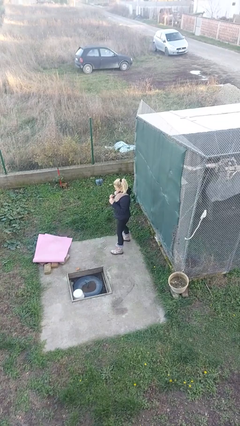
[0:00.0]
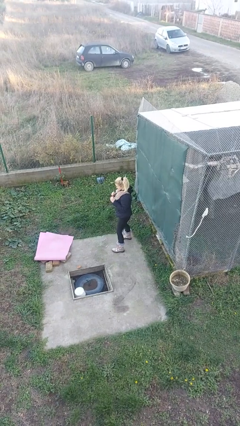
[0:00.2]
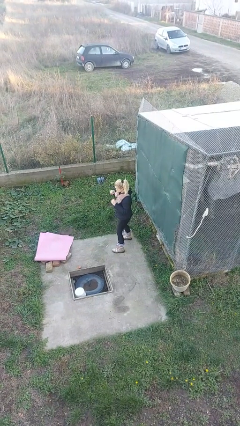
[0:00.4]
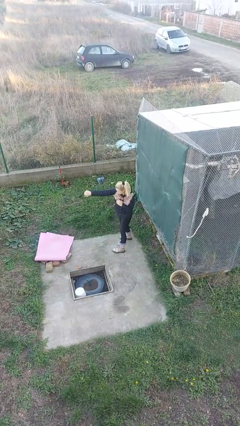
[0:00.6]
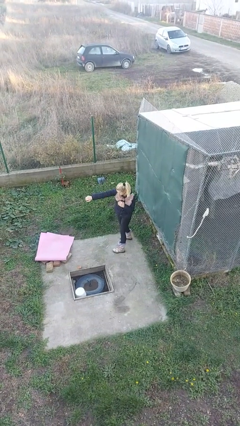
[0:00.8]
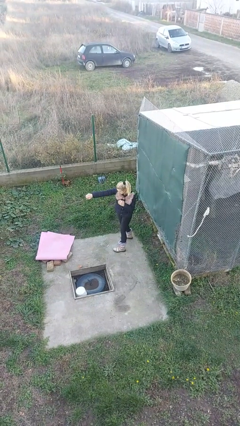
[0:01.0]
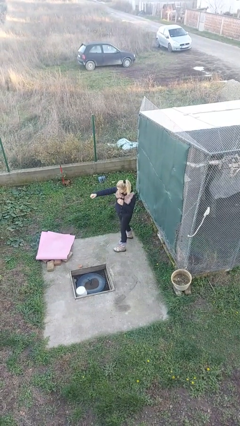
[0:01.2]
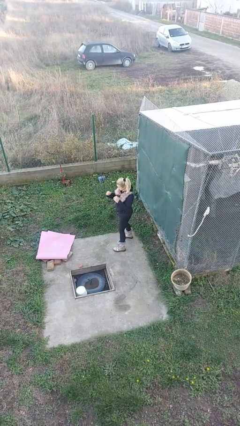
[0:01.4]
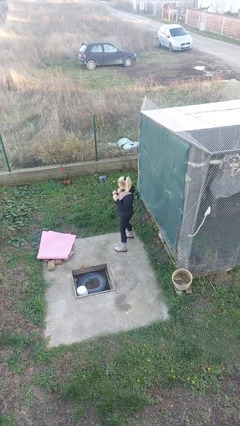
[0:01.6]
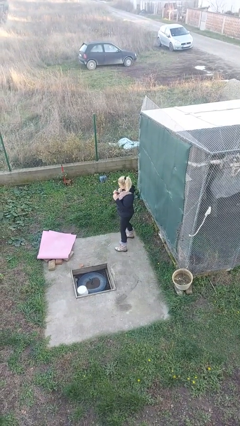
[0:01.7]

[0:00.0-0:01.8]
person punches

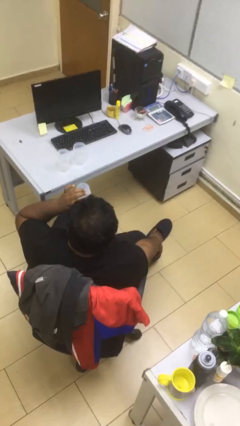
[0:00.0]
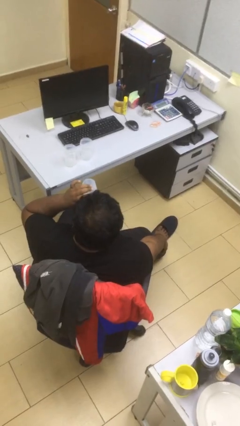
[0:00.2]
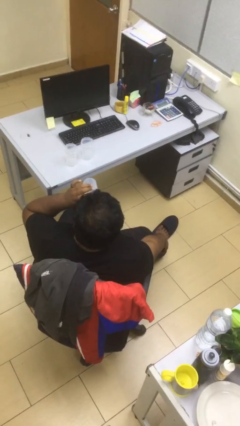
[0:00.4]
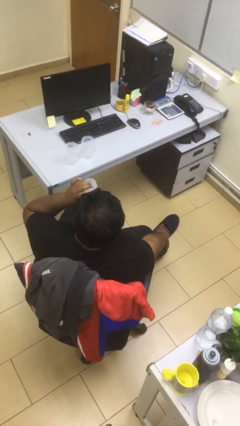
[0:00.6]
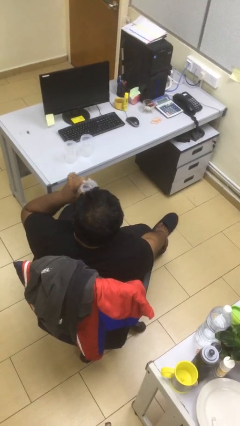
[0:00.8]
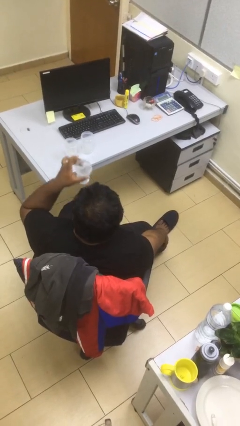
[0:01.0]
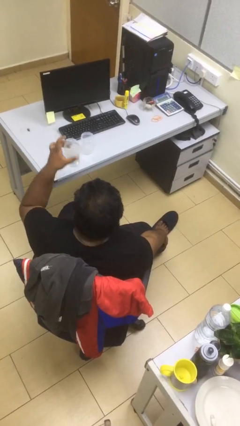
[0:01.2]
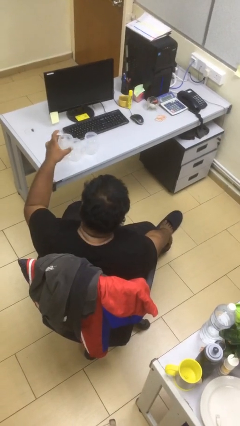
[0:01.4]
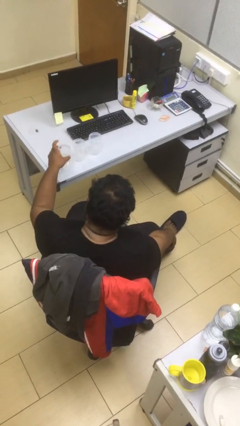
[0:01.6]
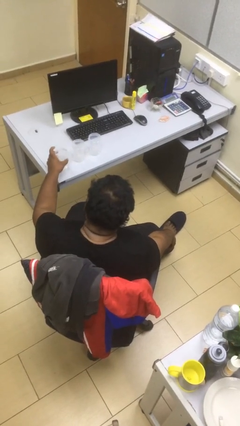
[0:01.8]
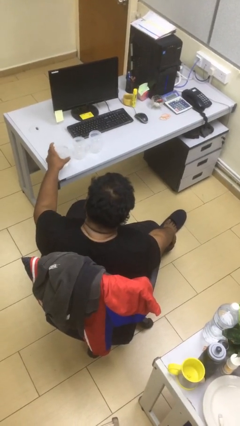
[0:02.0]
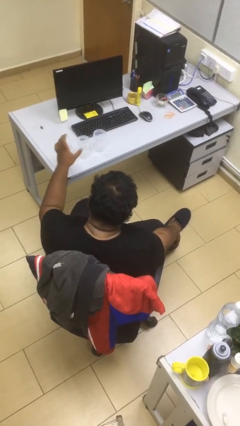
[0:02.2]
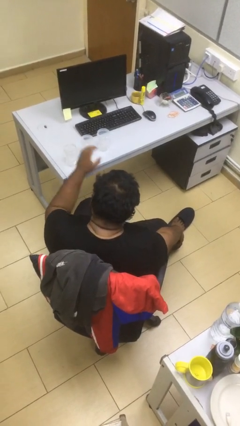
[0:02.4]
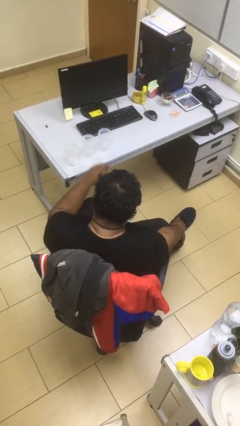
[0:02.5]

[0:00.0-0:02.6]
person puts down object on table

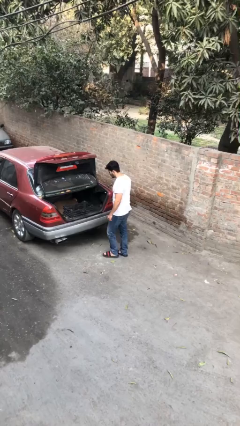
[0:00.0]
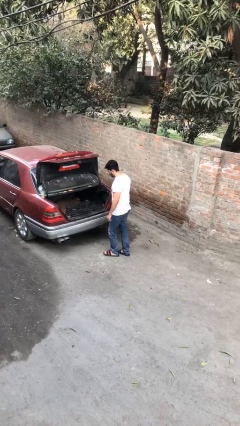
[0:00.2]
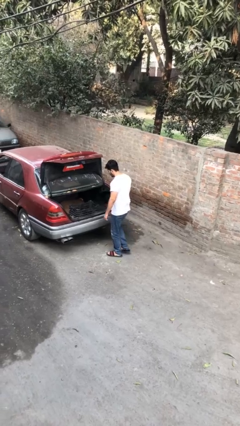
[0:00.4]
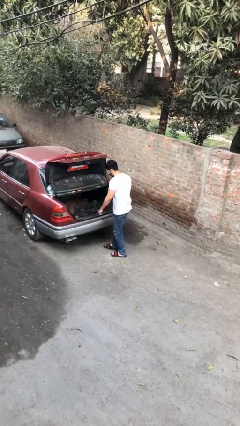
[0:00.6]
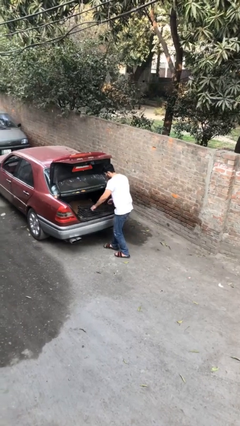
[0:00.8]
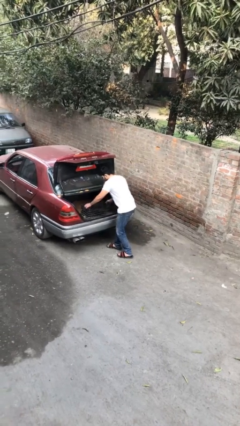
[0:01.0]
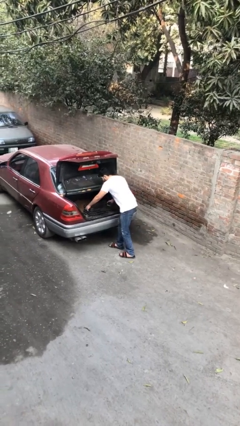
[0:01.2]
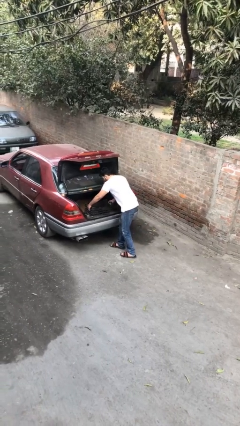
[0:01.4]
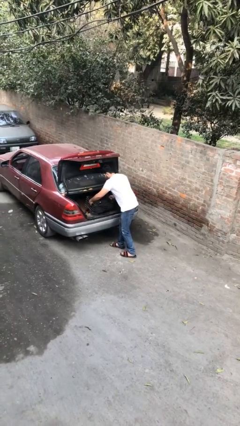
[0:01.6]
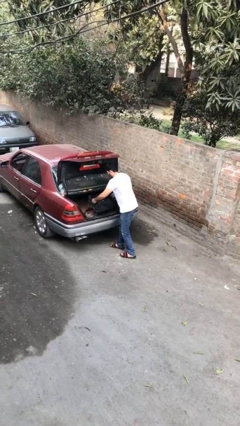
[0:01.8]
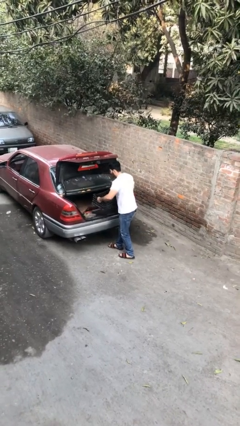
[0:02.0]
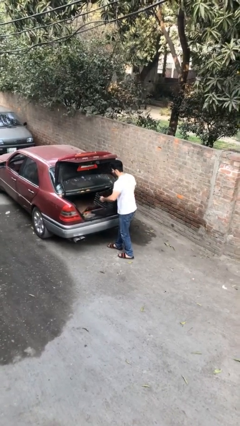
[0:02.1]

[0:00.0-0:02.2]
person unloads car

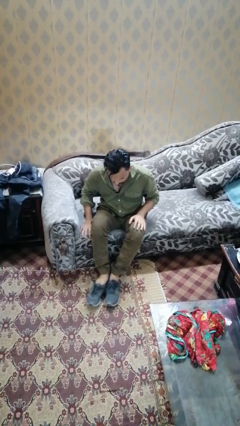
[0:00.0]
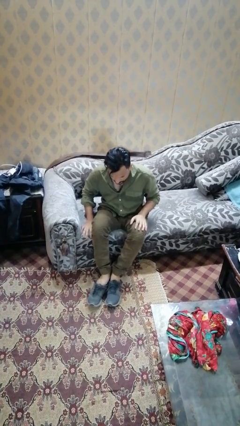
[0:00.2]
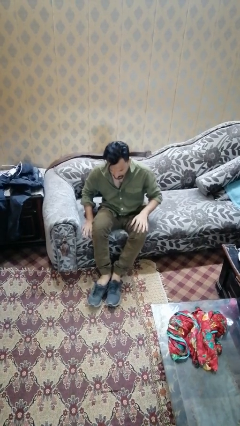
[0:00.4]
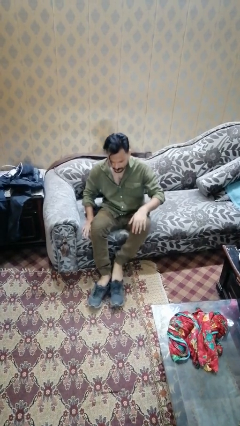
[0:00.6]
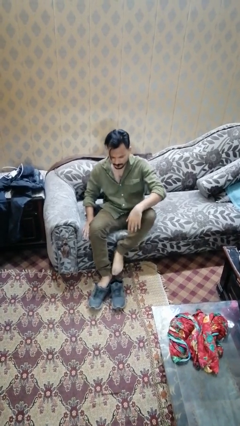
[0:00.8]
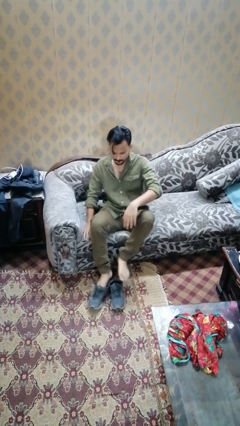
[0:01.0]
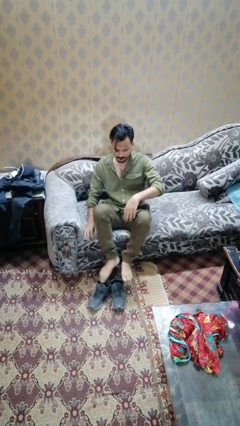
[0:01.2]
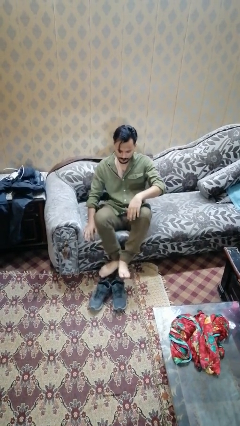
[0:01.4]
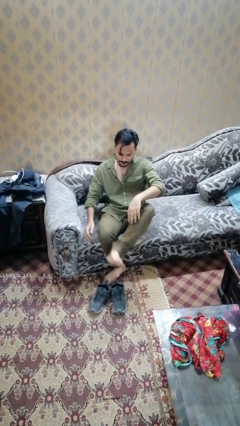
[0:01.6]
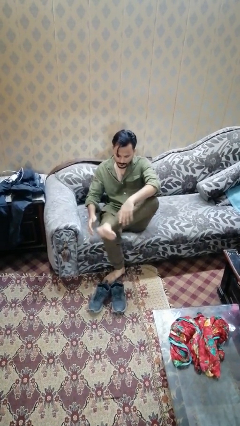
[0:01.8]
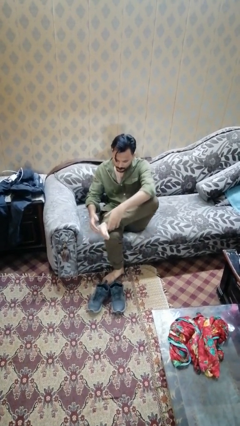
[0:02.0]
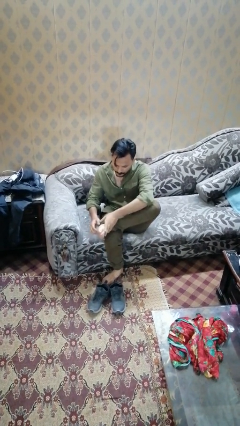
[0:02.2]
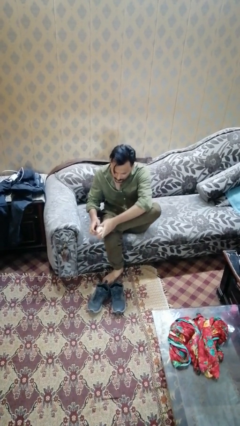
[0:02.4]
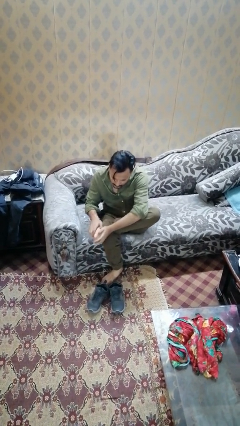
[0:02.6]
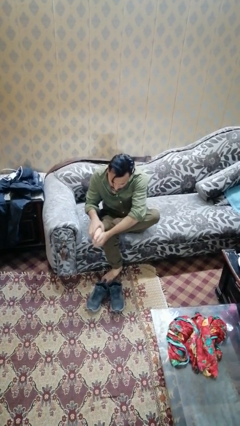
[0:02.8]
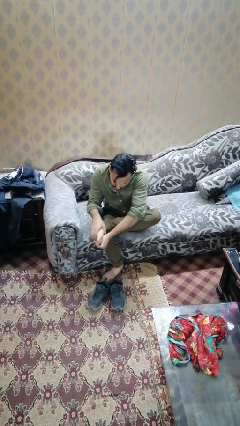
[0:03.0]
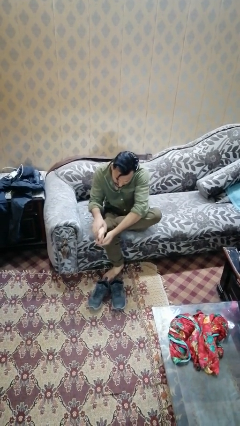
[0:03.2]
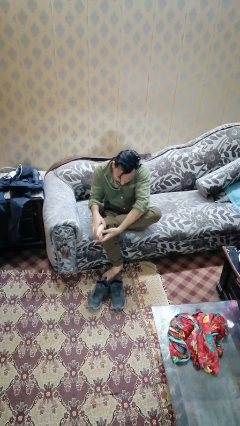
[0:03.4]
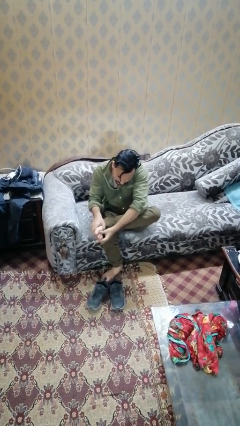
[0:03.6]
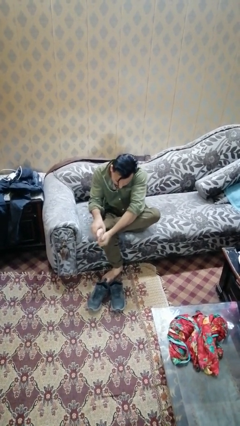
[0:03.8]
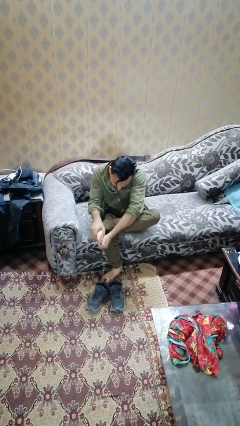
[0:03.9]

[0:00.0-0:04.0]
person rubs foot

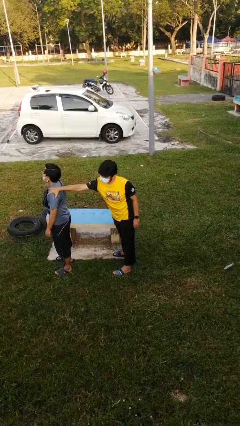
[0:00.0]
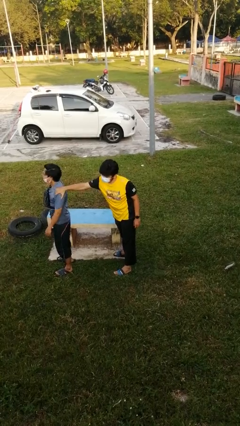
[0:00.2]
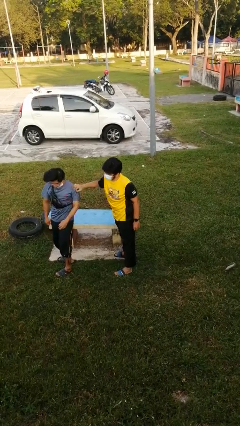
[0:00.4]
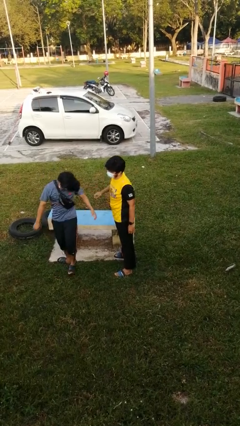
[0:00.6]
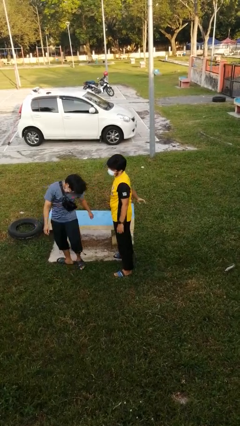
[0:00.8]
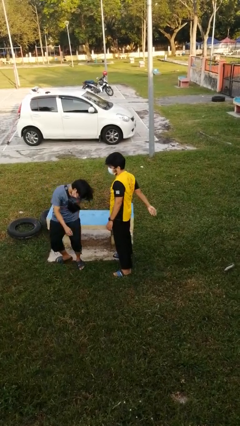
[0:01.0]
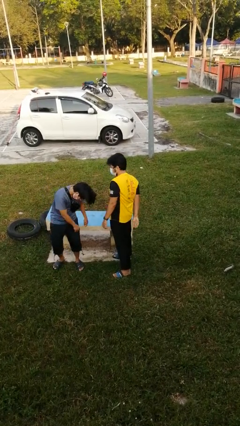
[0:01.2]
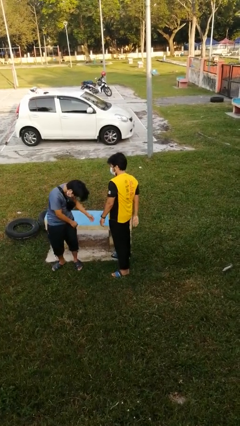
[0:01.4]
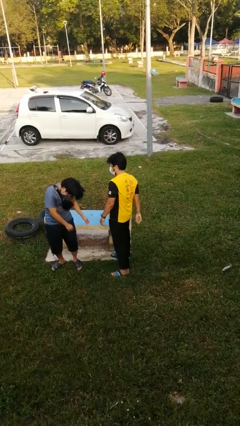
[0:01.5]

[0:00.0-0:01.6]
person spins person around

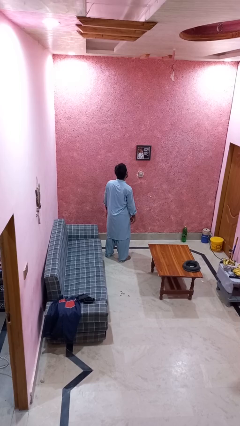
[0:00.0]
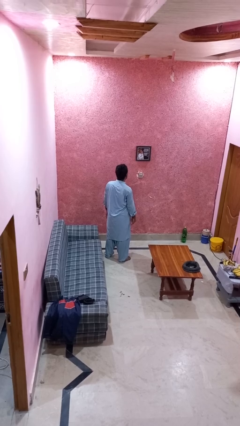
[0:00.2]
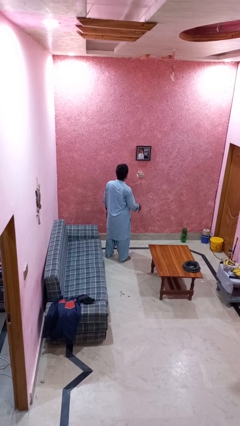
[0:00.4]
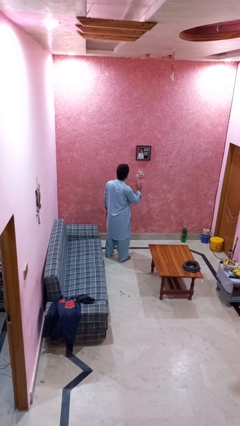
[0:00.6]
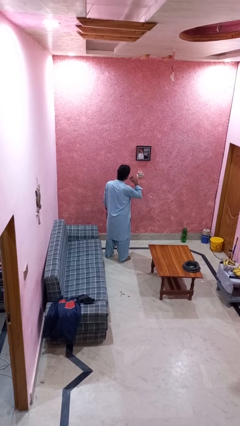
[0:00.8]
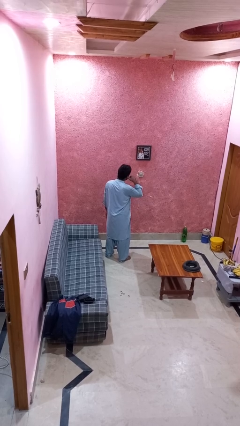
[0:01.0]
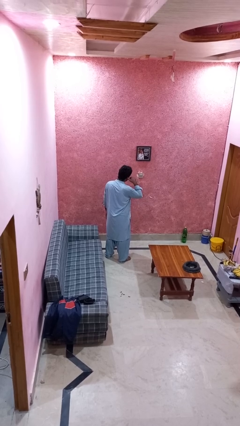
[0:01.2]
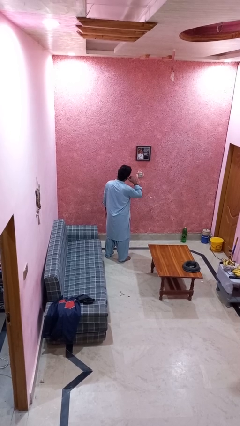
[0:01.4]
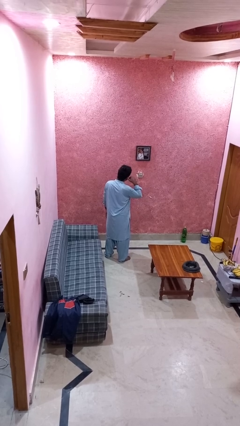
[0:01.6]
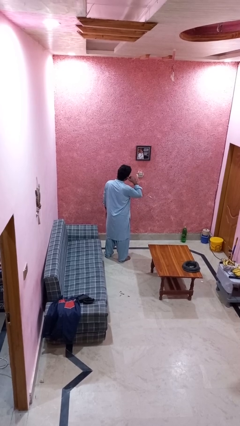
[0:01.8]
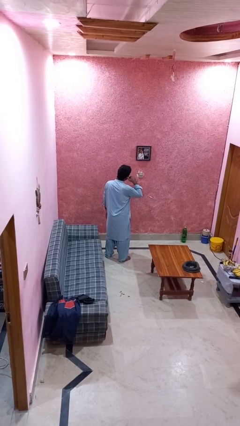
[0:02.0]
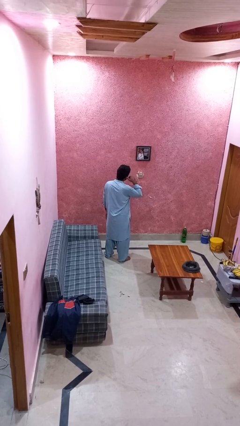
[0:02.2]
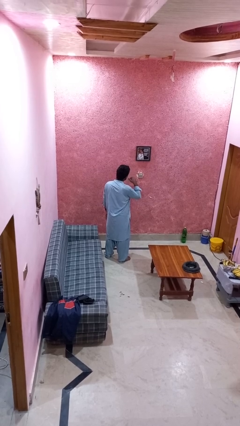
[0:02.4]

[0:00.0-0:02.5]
person gestures call me

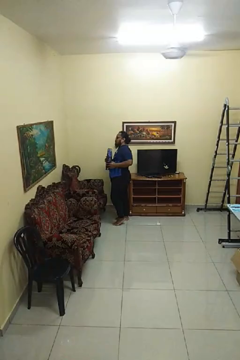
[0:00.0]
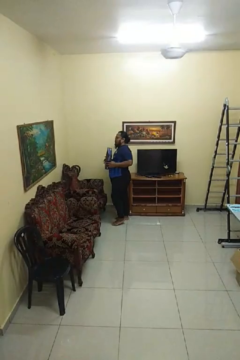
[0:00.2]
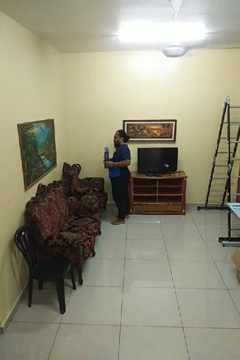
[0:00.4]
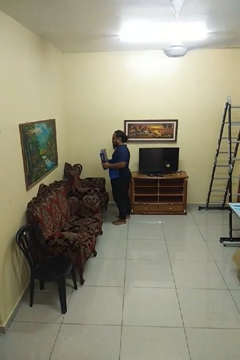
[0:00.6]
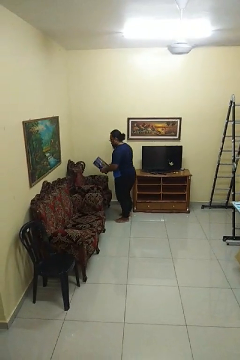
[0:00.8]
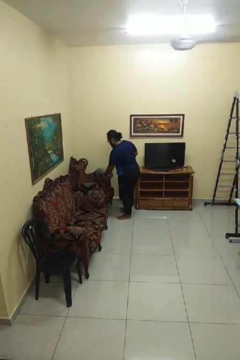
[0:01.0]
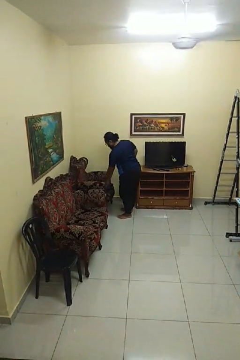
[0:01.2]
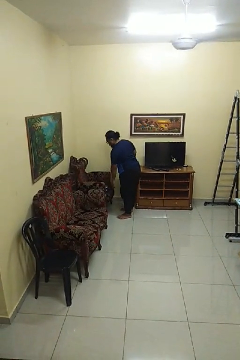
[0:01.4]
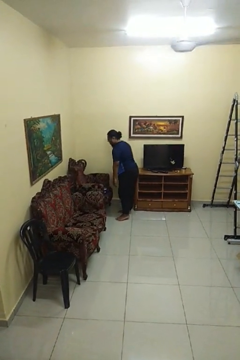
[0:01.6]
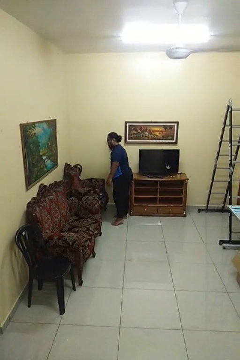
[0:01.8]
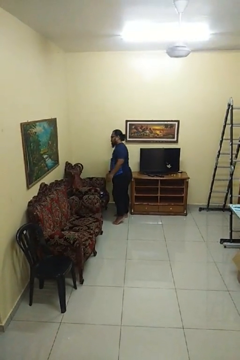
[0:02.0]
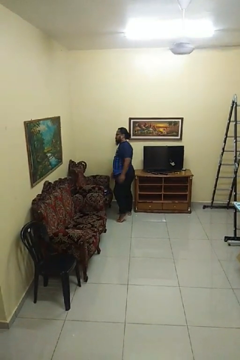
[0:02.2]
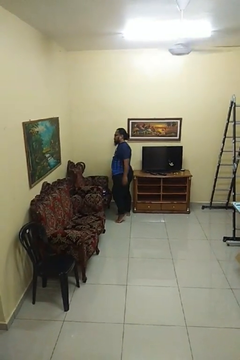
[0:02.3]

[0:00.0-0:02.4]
person puts down object on couch

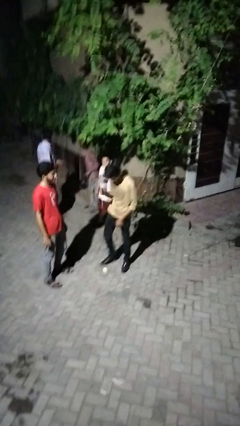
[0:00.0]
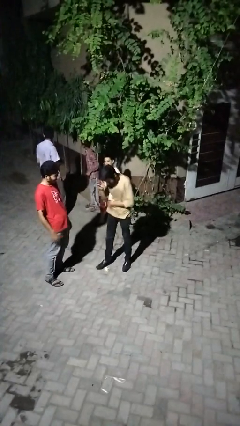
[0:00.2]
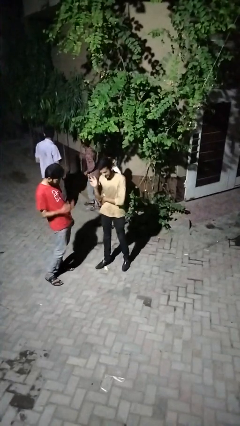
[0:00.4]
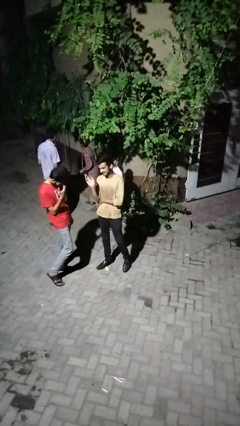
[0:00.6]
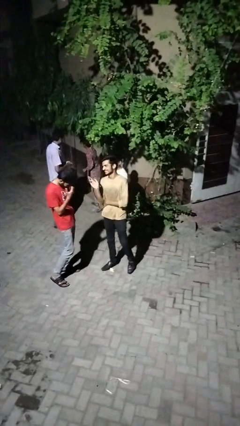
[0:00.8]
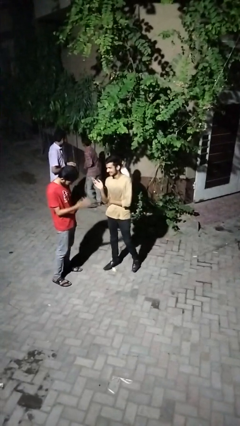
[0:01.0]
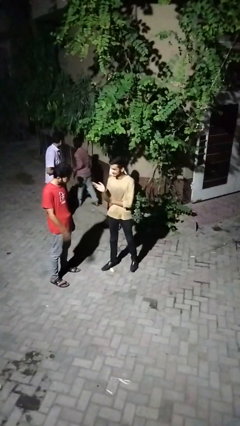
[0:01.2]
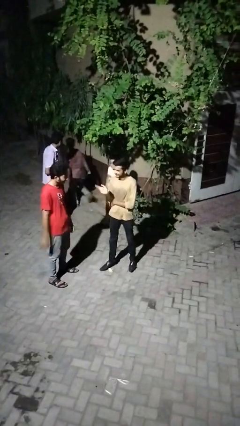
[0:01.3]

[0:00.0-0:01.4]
person laughs with person
